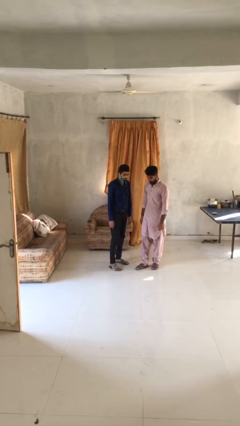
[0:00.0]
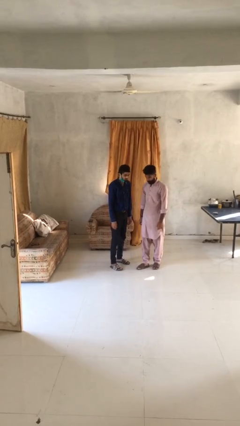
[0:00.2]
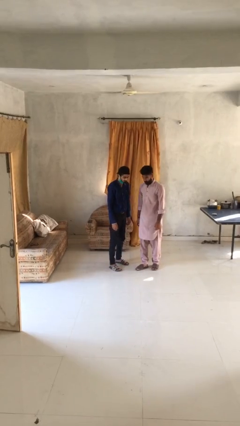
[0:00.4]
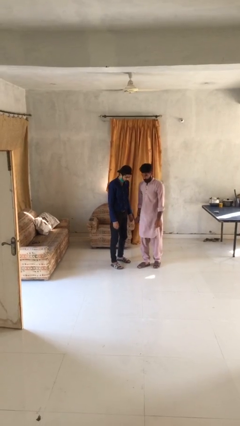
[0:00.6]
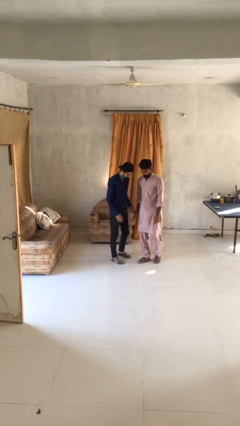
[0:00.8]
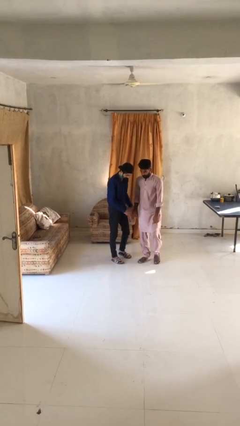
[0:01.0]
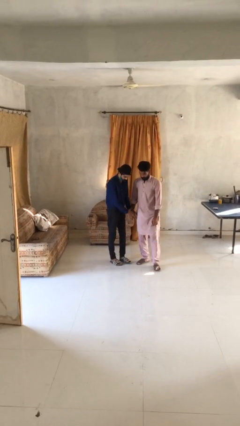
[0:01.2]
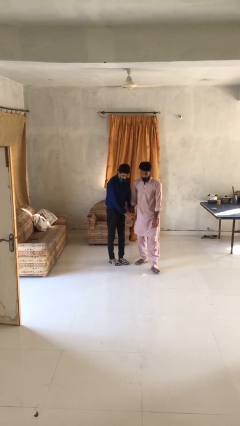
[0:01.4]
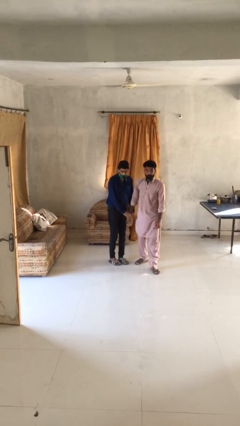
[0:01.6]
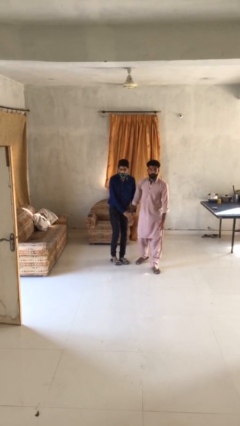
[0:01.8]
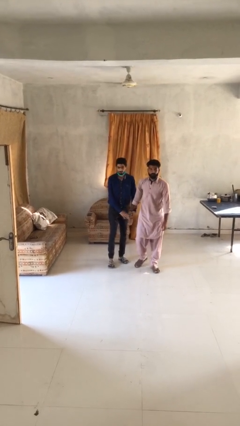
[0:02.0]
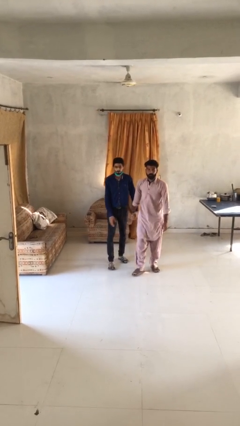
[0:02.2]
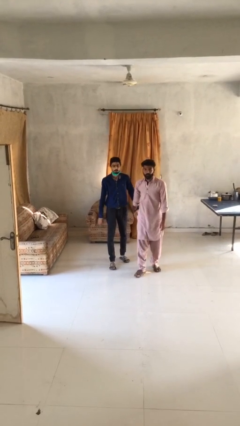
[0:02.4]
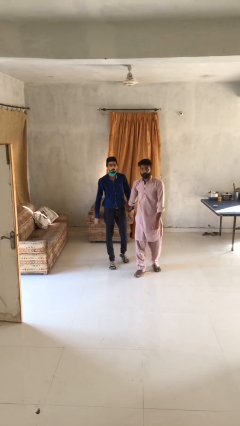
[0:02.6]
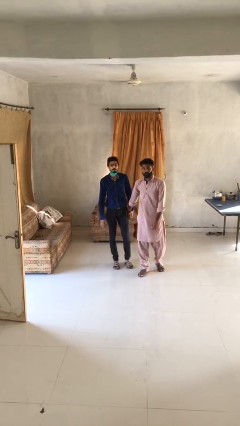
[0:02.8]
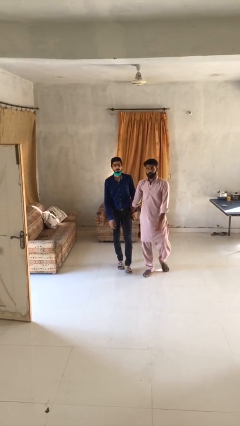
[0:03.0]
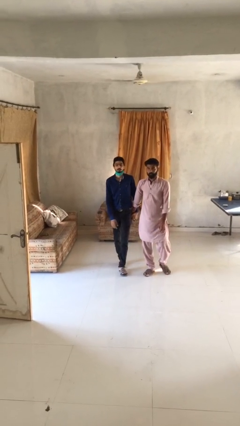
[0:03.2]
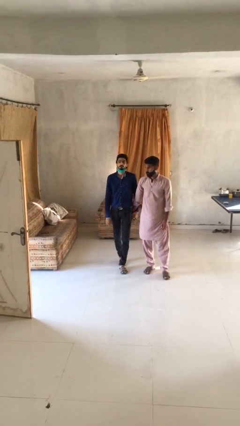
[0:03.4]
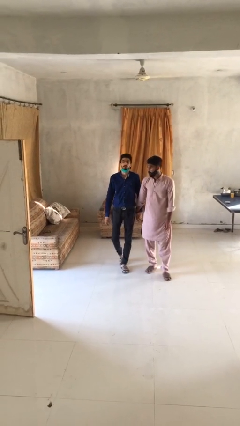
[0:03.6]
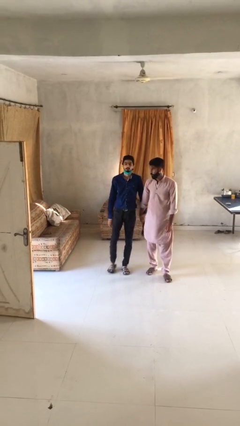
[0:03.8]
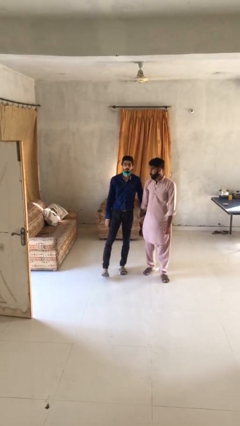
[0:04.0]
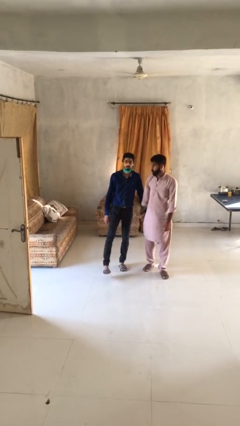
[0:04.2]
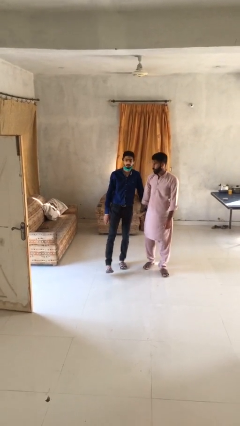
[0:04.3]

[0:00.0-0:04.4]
person holds hand

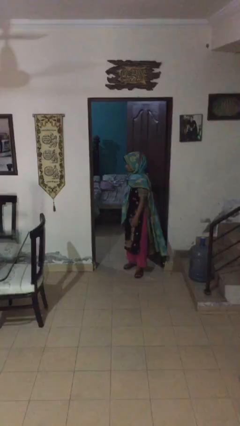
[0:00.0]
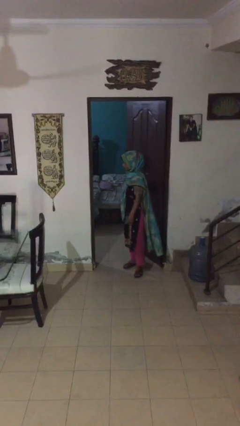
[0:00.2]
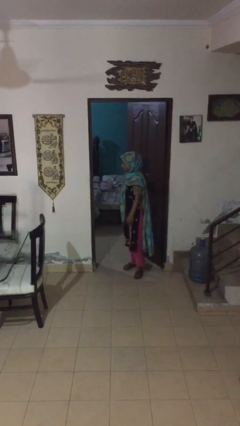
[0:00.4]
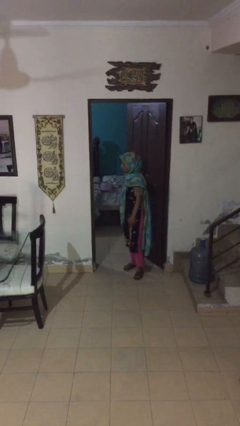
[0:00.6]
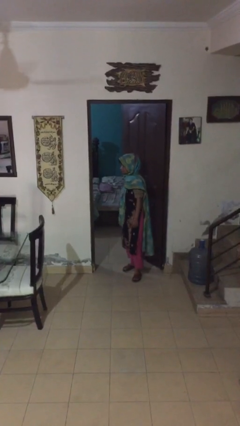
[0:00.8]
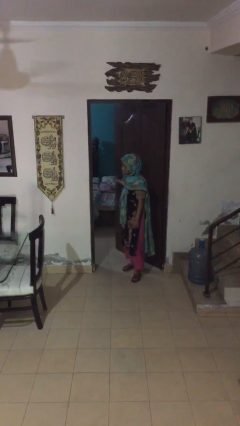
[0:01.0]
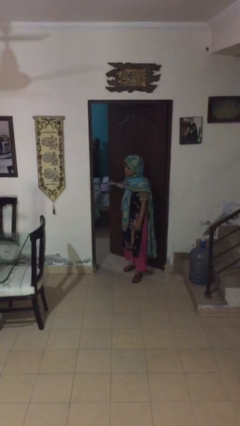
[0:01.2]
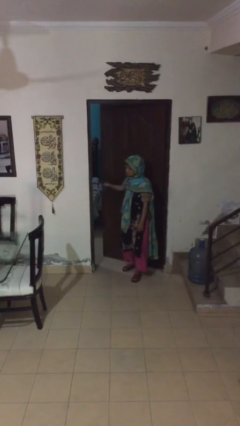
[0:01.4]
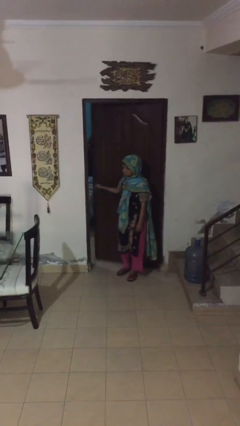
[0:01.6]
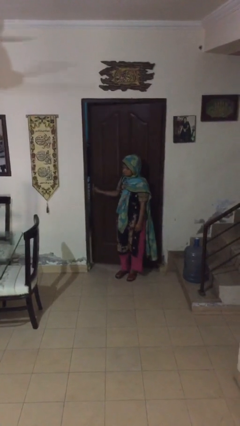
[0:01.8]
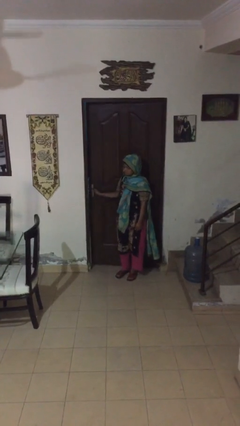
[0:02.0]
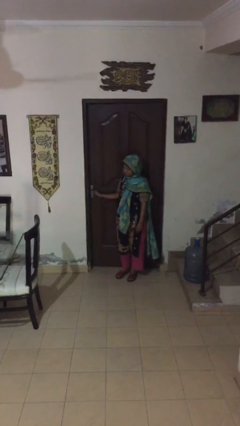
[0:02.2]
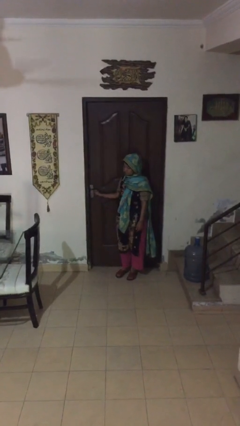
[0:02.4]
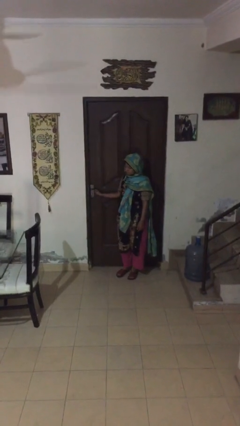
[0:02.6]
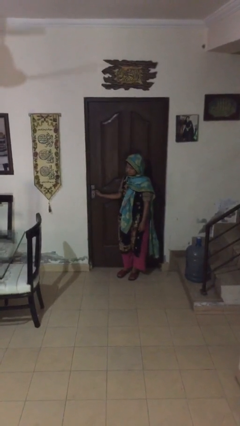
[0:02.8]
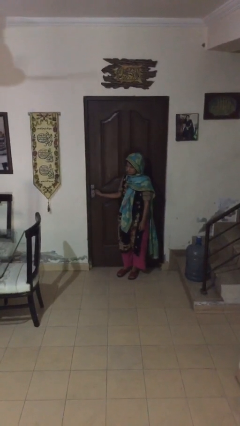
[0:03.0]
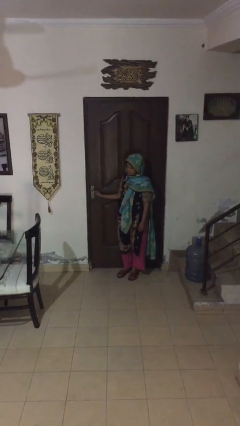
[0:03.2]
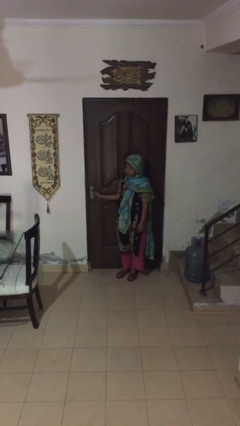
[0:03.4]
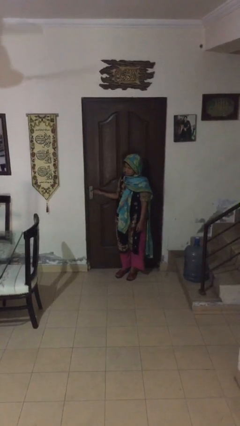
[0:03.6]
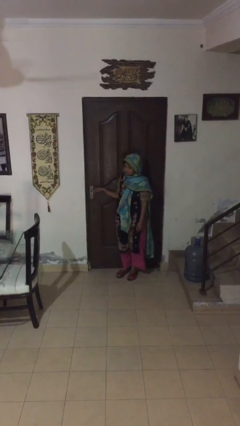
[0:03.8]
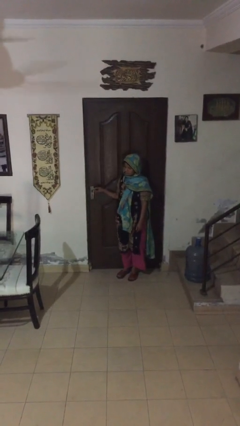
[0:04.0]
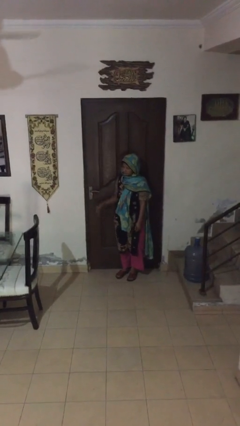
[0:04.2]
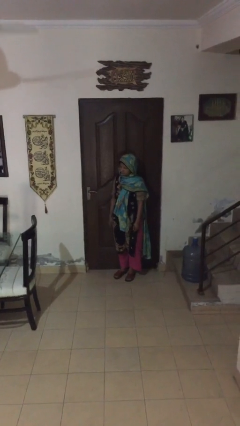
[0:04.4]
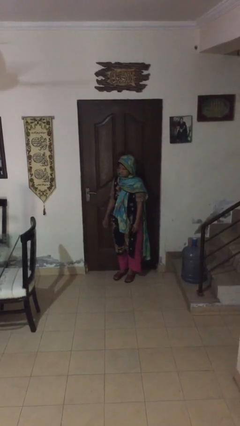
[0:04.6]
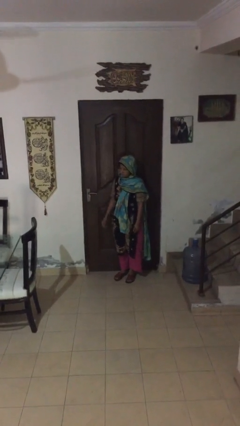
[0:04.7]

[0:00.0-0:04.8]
person closes facility door

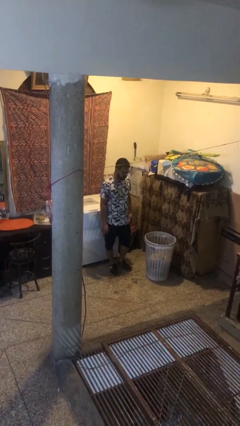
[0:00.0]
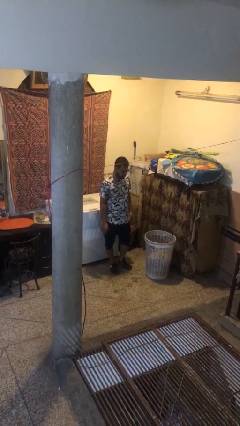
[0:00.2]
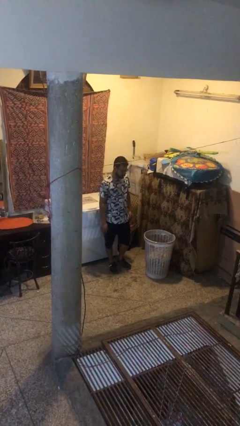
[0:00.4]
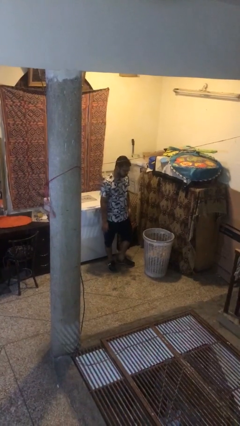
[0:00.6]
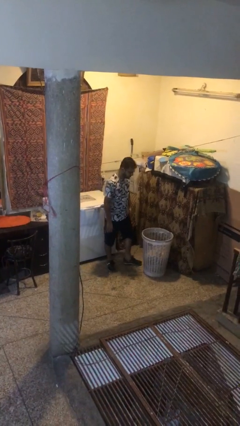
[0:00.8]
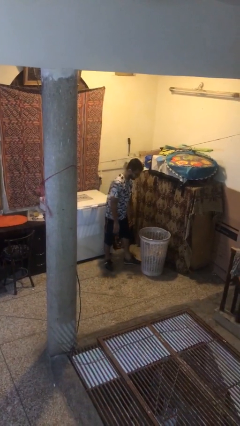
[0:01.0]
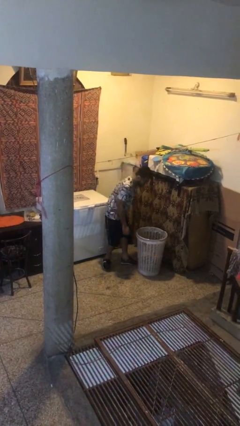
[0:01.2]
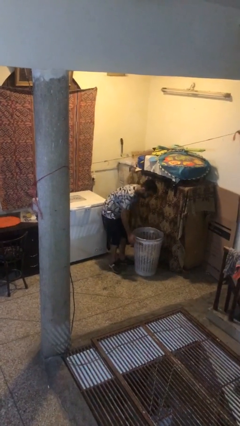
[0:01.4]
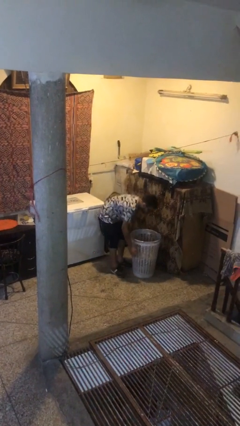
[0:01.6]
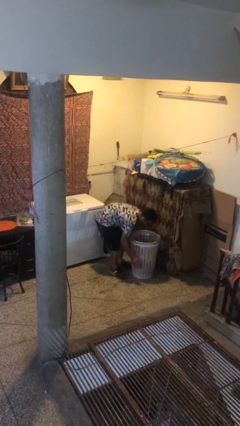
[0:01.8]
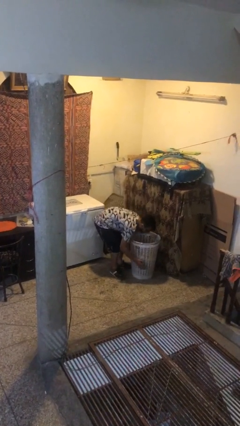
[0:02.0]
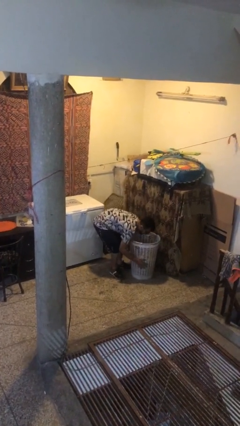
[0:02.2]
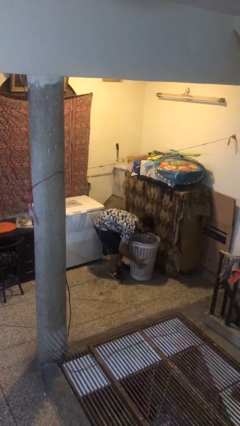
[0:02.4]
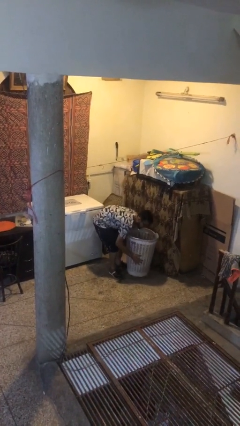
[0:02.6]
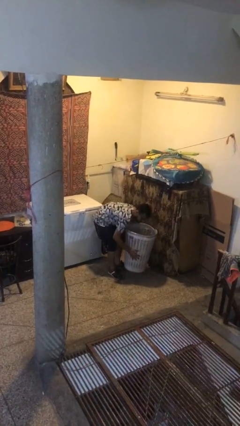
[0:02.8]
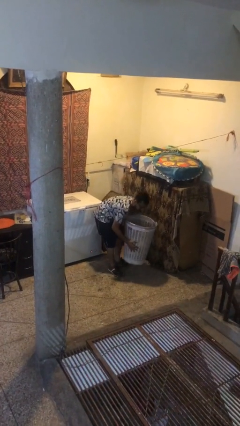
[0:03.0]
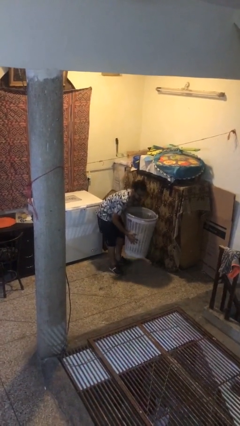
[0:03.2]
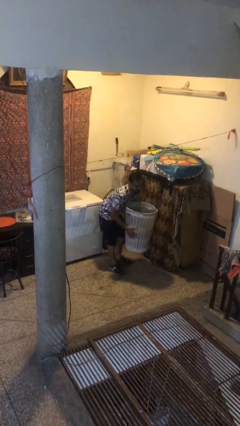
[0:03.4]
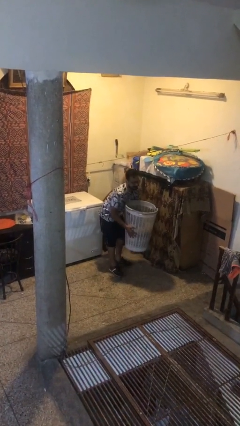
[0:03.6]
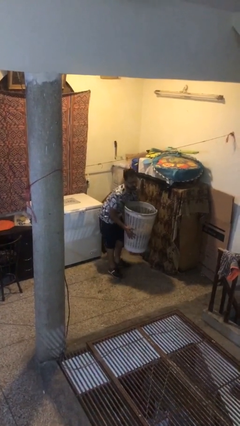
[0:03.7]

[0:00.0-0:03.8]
person picks up object from floor

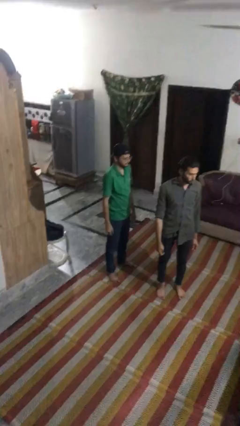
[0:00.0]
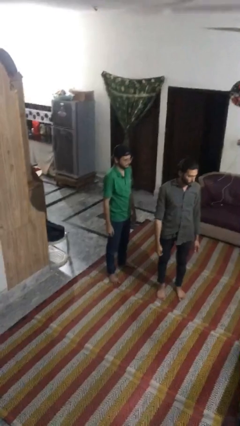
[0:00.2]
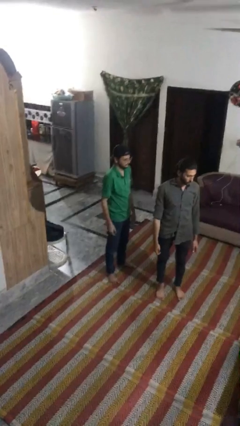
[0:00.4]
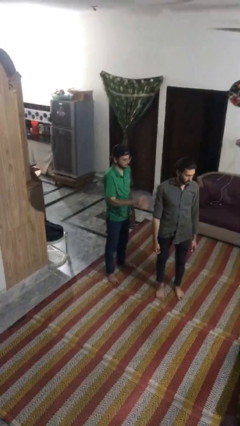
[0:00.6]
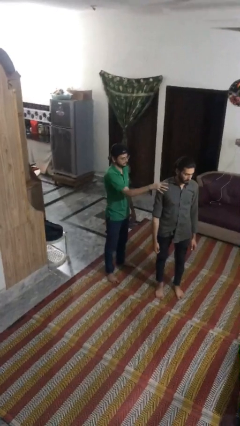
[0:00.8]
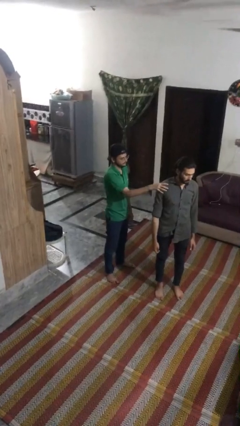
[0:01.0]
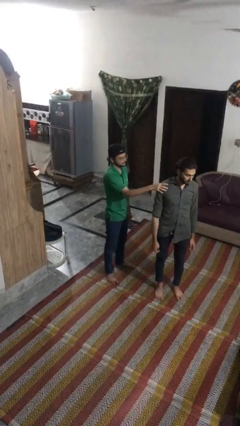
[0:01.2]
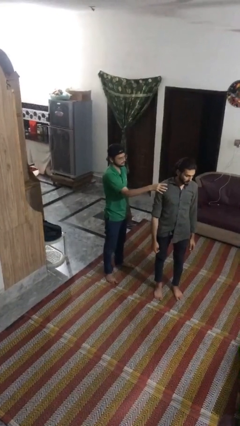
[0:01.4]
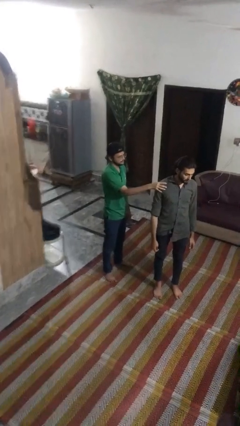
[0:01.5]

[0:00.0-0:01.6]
person grabs person by shoulder

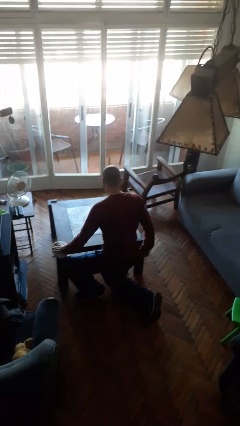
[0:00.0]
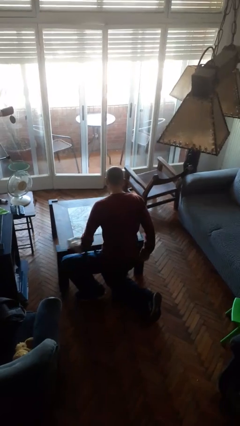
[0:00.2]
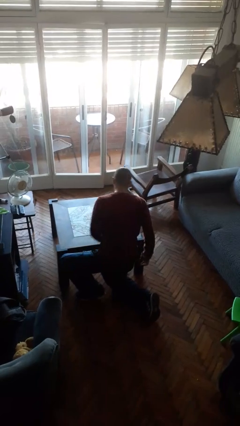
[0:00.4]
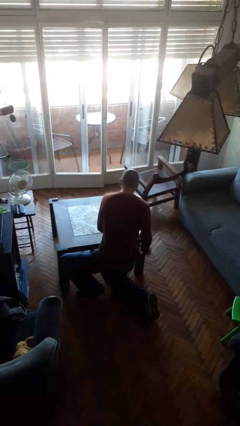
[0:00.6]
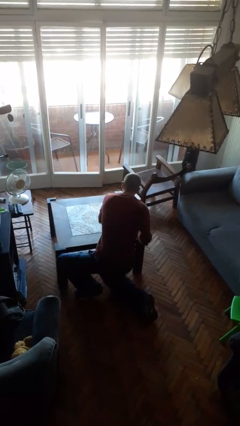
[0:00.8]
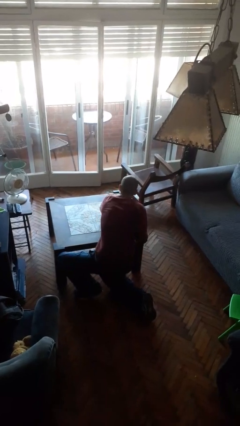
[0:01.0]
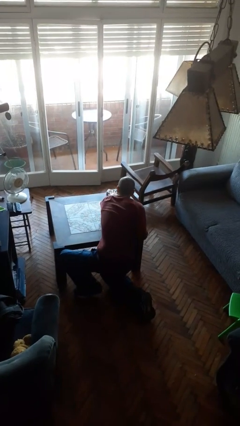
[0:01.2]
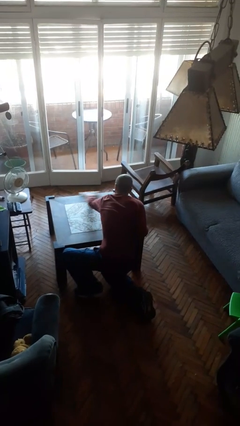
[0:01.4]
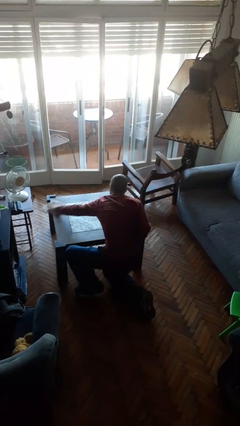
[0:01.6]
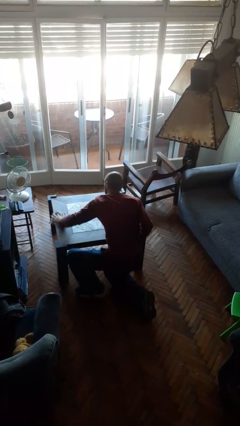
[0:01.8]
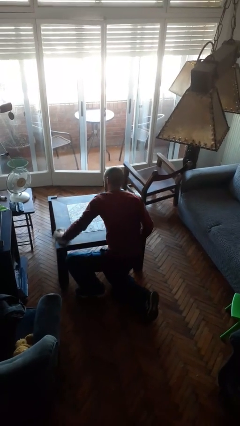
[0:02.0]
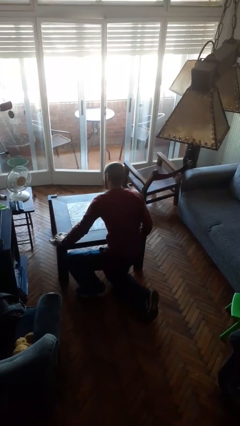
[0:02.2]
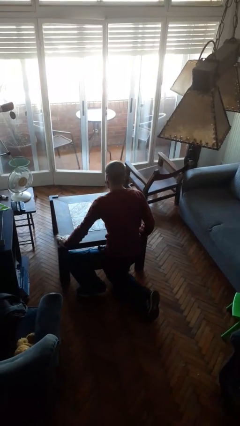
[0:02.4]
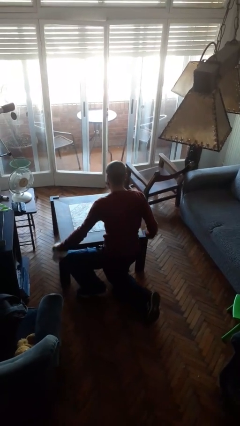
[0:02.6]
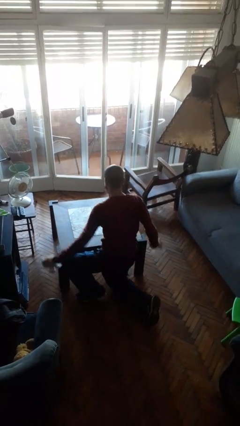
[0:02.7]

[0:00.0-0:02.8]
person cleans table with rag

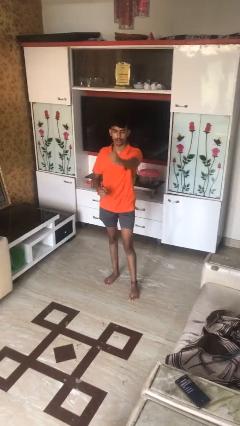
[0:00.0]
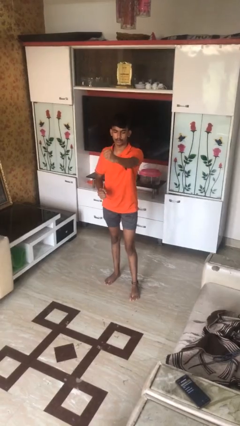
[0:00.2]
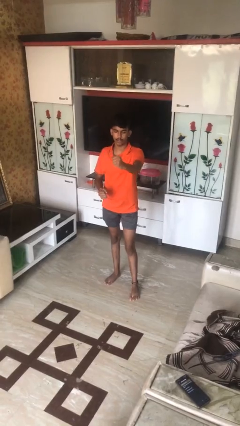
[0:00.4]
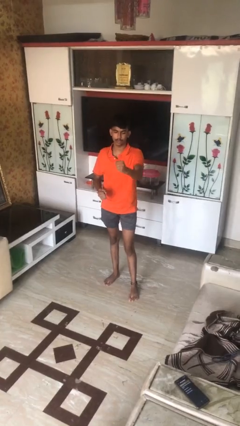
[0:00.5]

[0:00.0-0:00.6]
person punches
